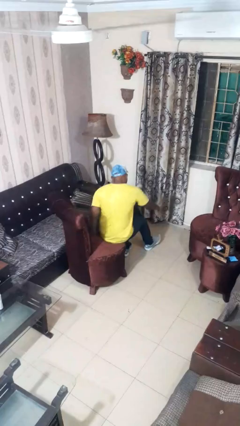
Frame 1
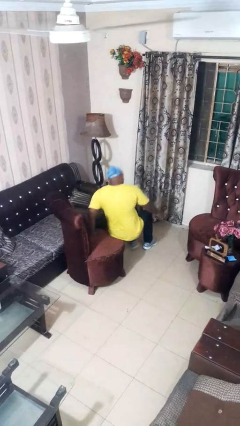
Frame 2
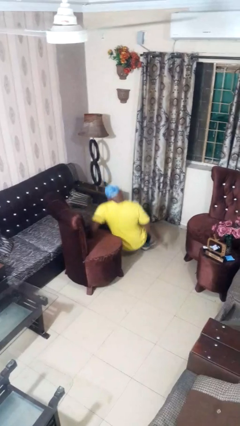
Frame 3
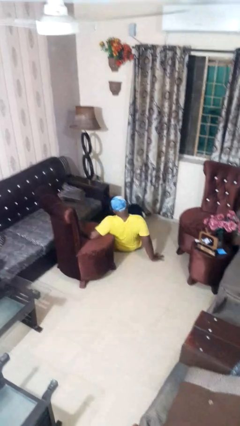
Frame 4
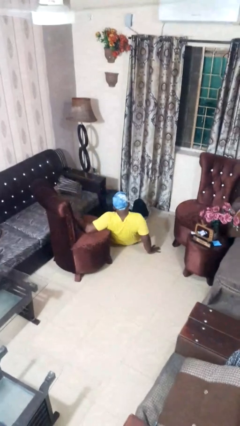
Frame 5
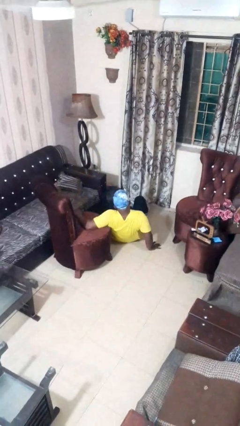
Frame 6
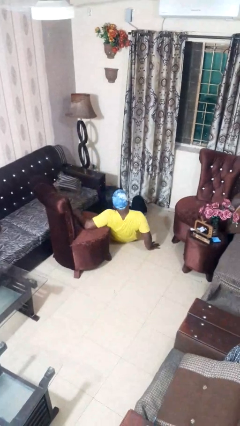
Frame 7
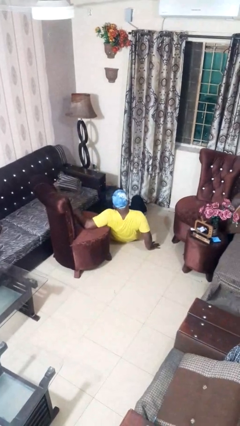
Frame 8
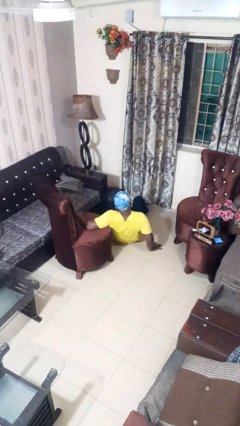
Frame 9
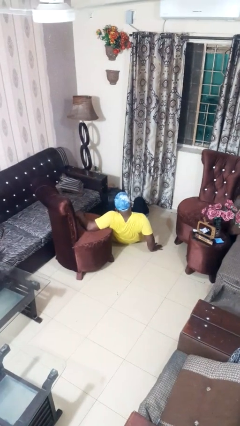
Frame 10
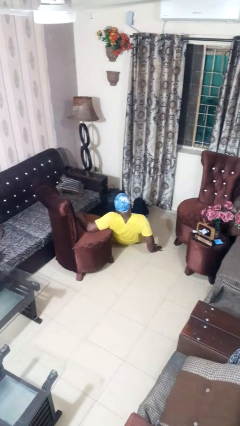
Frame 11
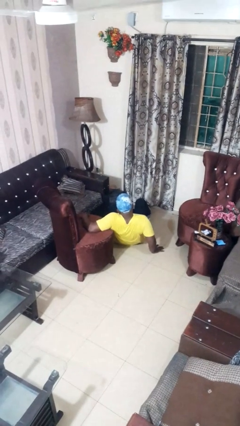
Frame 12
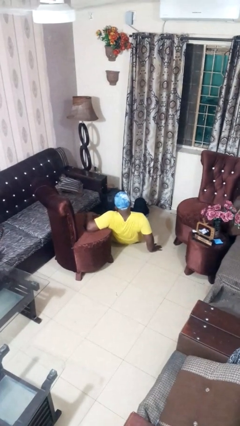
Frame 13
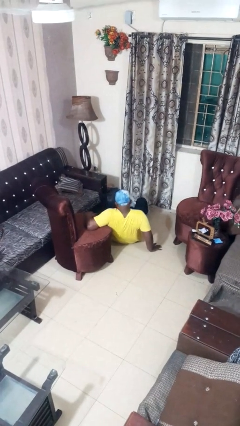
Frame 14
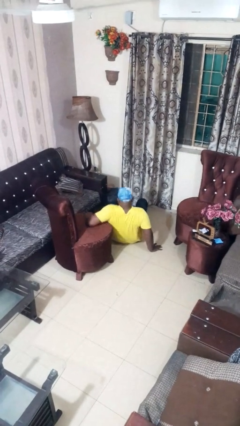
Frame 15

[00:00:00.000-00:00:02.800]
person falls from chair

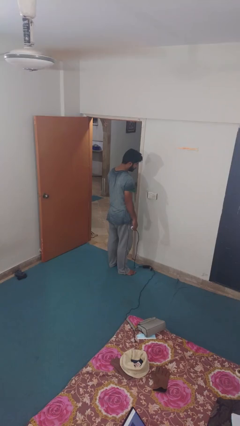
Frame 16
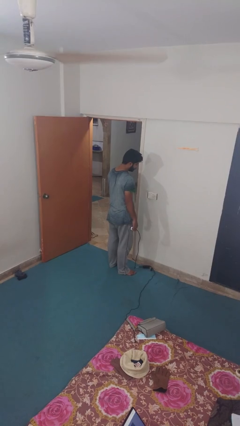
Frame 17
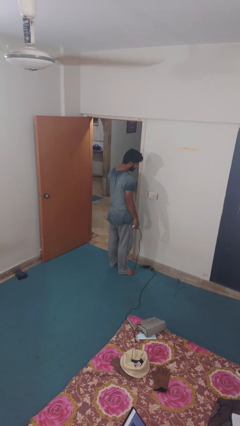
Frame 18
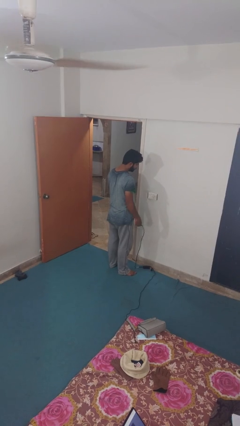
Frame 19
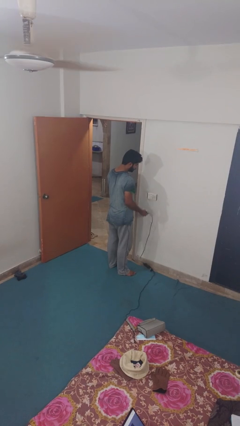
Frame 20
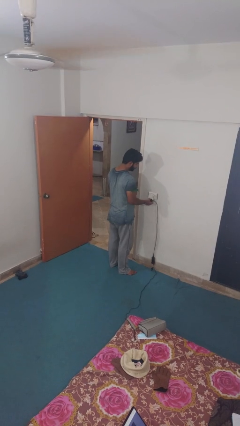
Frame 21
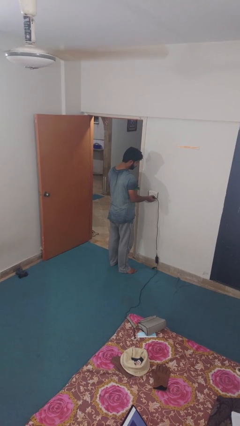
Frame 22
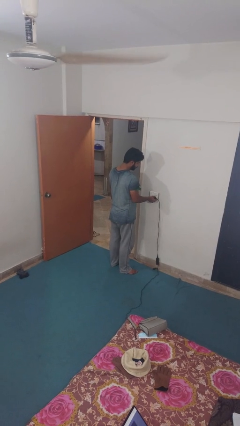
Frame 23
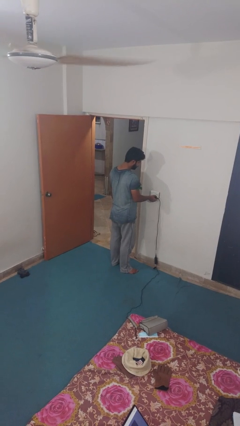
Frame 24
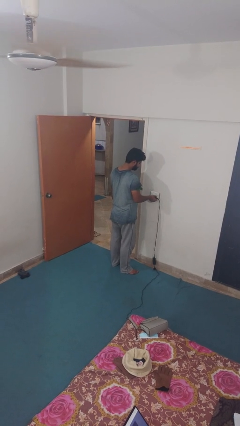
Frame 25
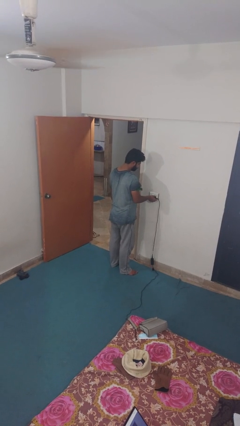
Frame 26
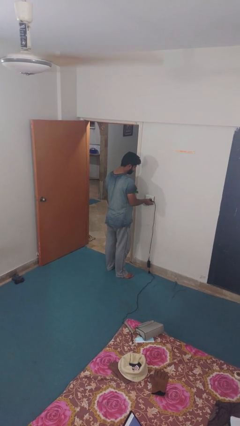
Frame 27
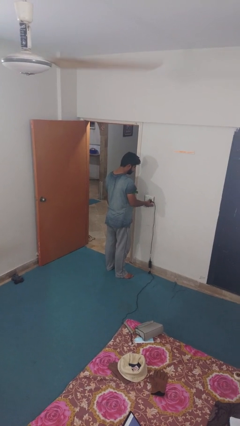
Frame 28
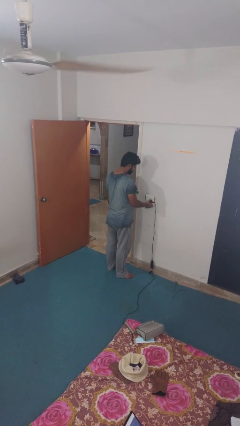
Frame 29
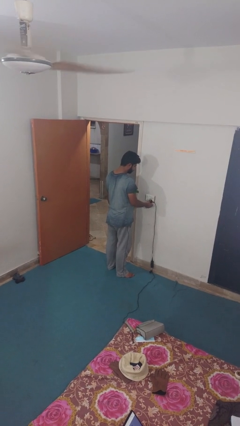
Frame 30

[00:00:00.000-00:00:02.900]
person plugs into electrical socket

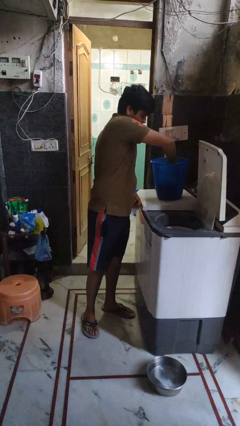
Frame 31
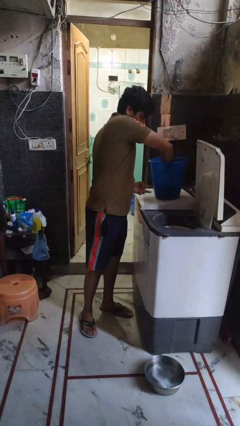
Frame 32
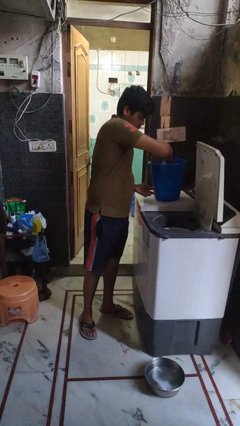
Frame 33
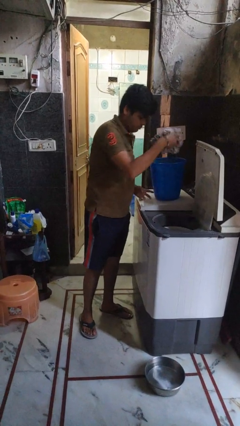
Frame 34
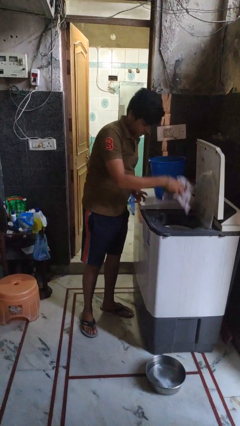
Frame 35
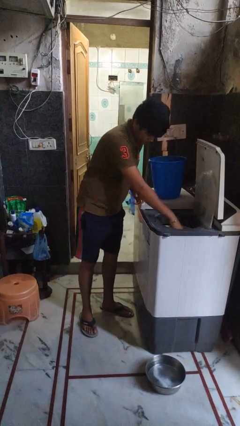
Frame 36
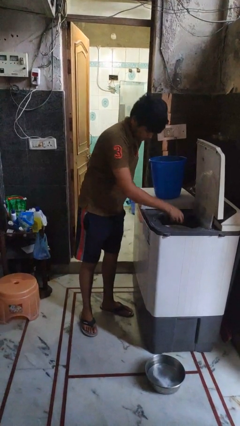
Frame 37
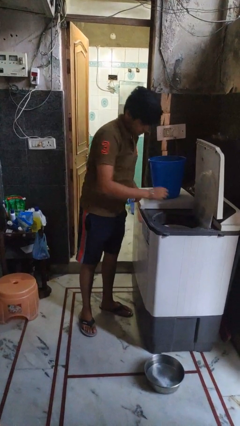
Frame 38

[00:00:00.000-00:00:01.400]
person loads dryer

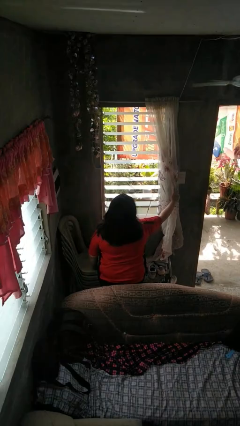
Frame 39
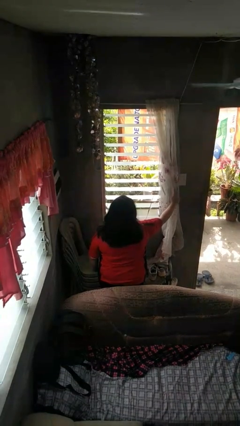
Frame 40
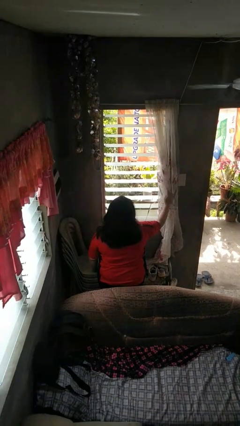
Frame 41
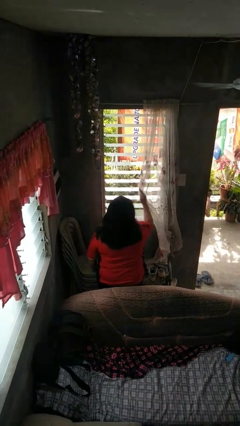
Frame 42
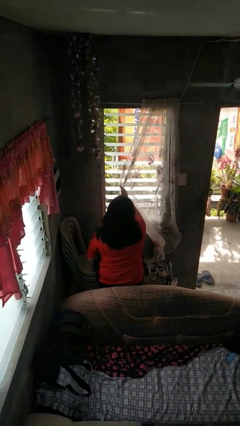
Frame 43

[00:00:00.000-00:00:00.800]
person closes curtains

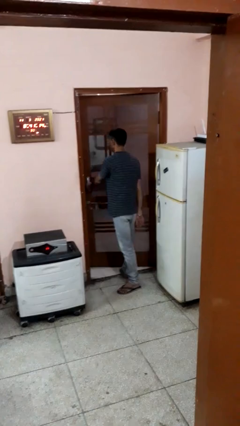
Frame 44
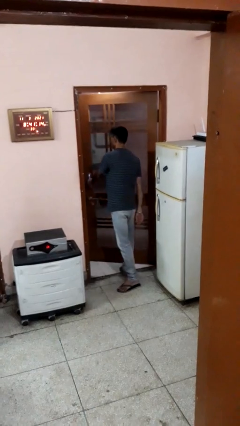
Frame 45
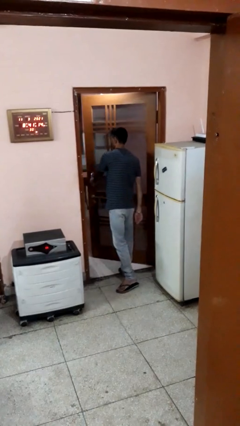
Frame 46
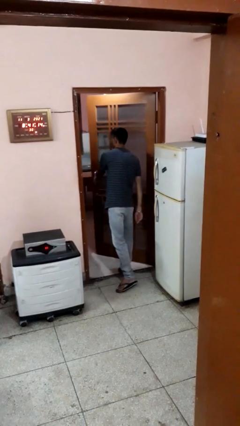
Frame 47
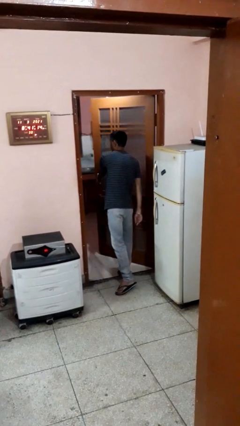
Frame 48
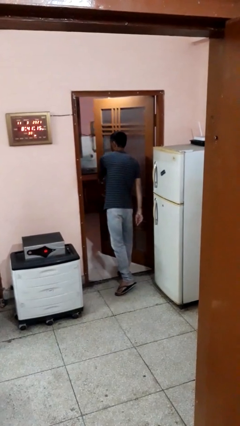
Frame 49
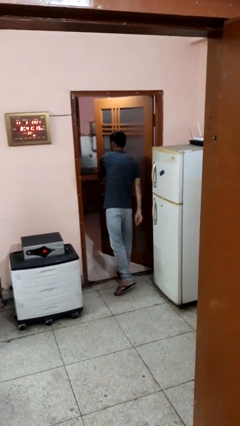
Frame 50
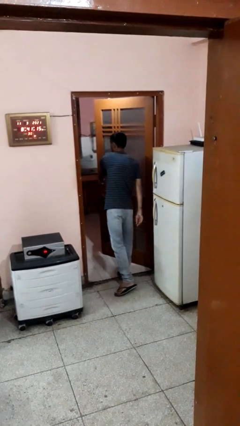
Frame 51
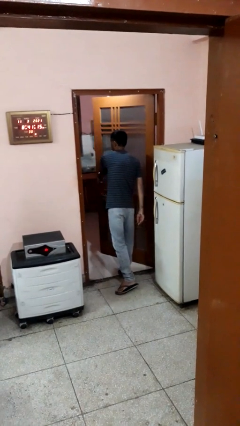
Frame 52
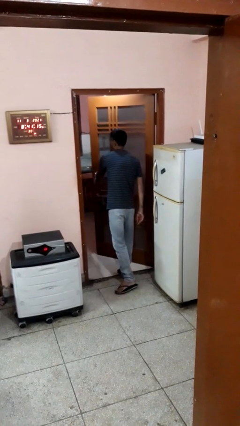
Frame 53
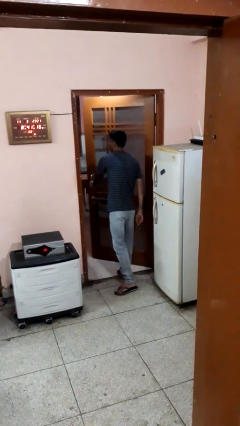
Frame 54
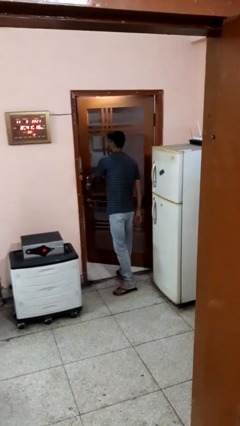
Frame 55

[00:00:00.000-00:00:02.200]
person opens facility door

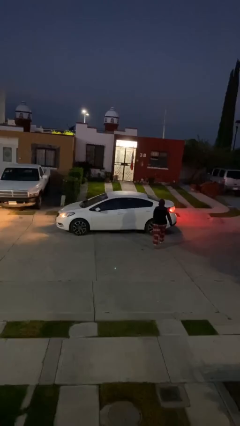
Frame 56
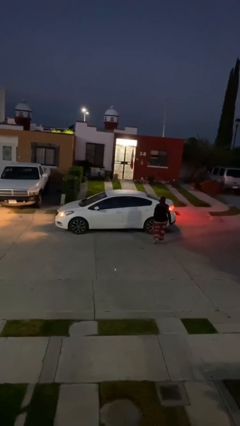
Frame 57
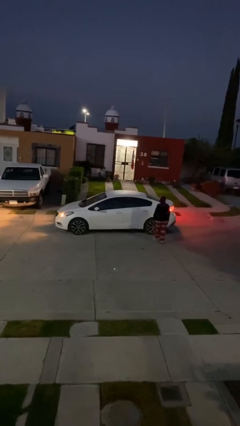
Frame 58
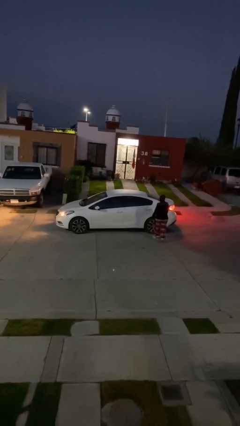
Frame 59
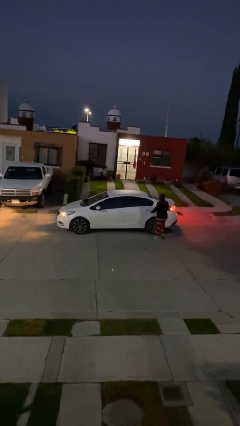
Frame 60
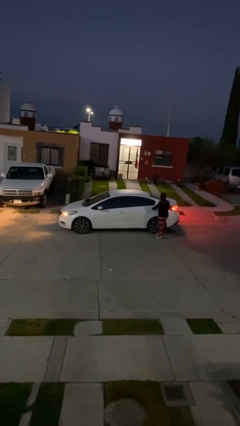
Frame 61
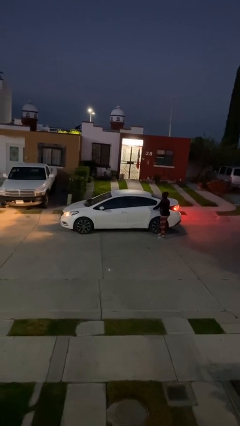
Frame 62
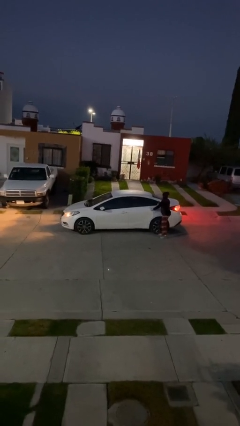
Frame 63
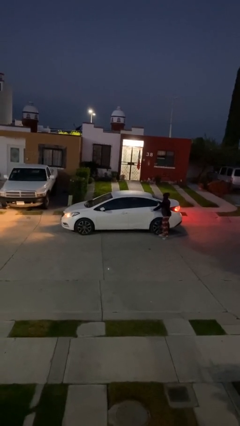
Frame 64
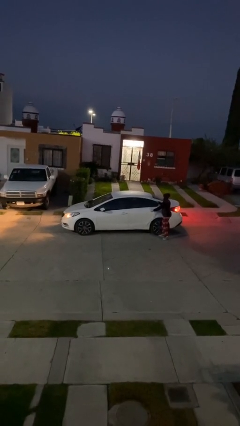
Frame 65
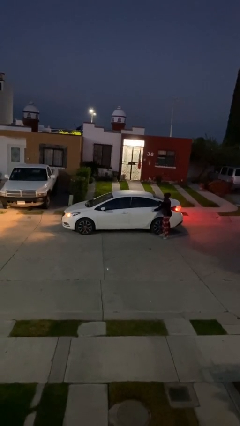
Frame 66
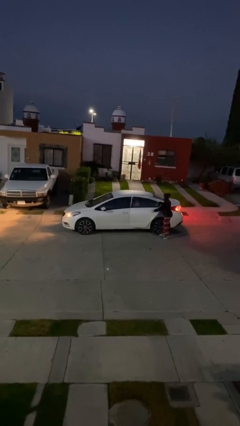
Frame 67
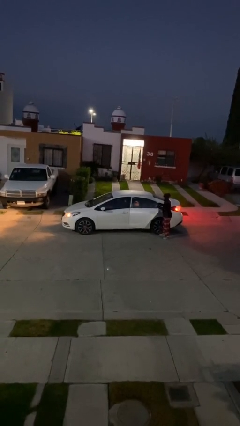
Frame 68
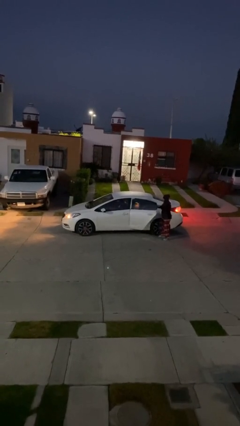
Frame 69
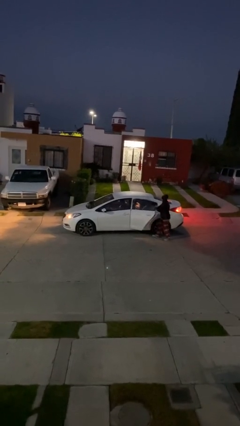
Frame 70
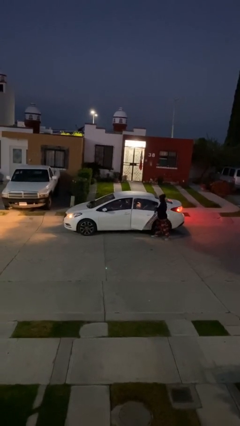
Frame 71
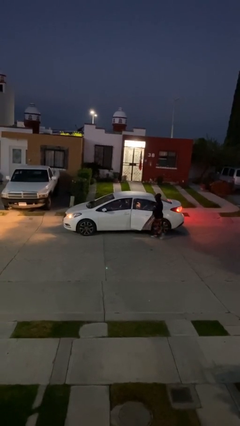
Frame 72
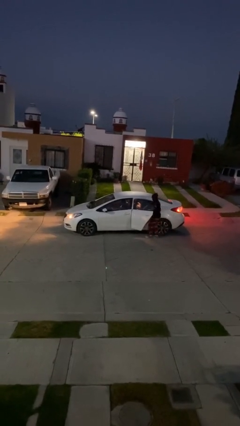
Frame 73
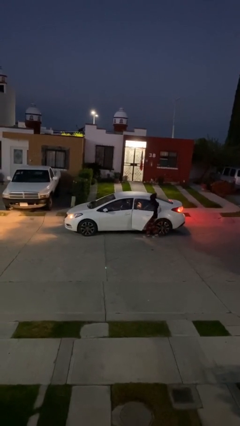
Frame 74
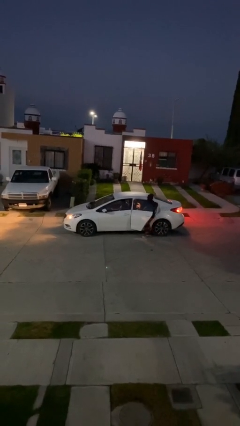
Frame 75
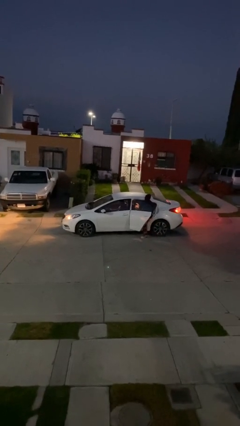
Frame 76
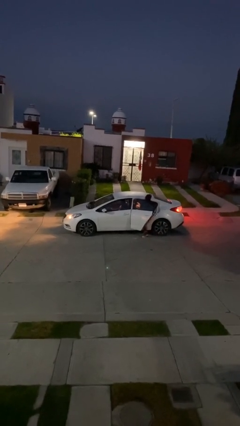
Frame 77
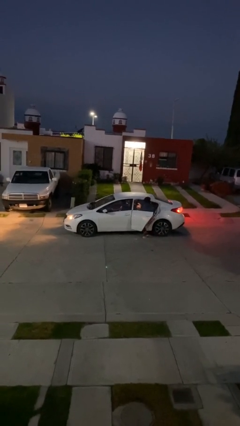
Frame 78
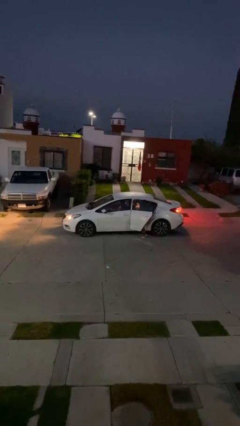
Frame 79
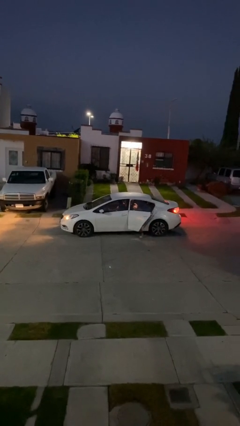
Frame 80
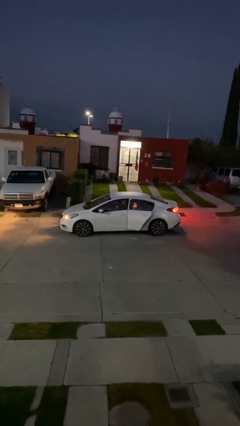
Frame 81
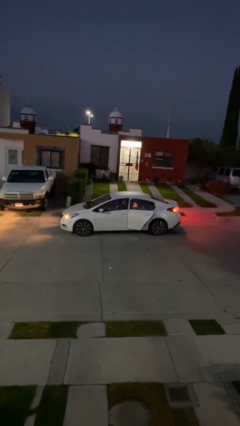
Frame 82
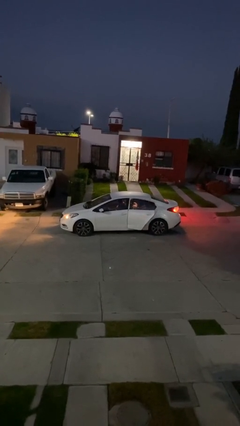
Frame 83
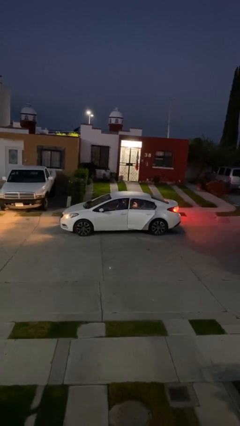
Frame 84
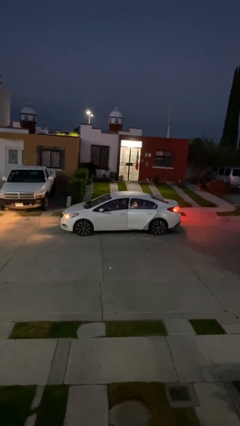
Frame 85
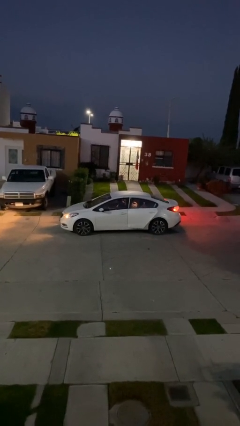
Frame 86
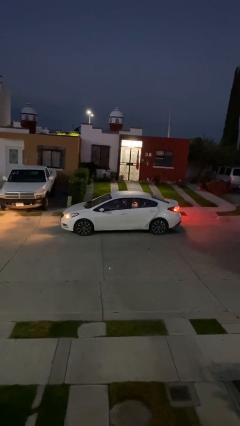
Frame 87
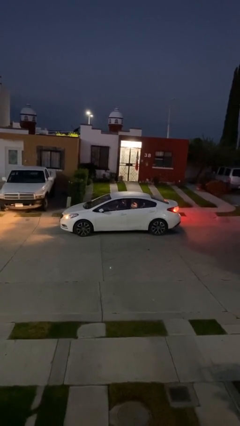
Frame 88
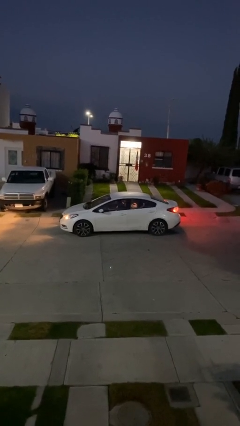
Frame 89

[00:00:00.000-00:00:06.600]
car picks up person

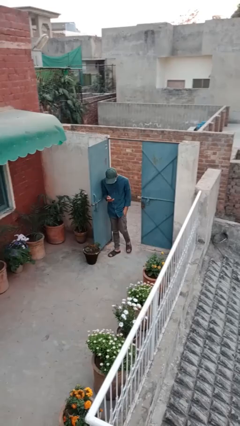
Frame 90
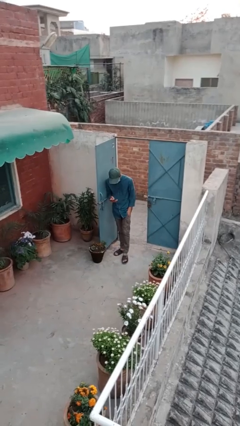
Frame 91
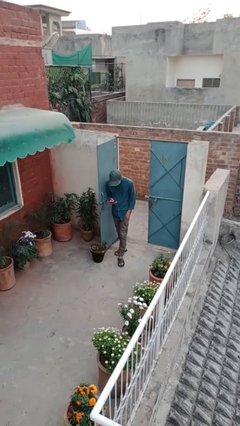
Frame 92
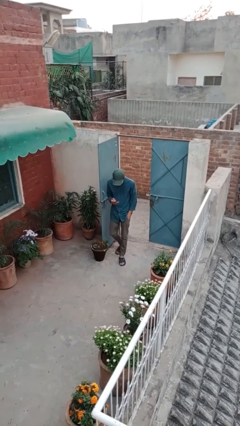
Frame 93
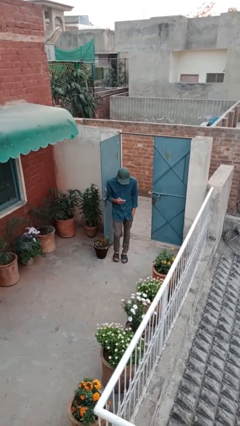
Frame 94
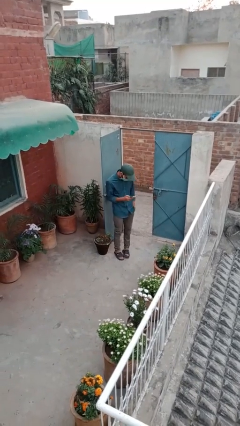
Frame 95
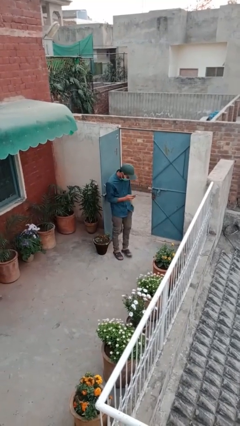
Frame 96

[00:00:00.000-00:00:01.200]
person enters scene through structure
